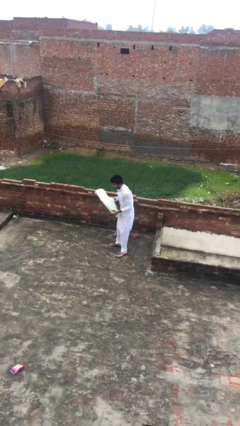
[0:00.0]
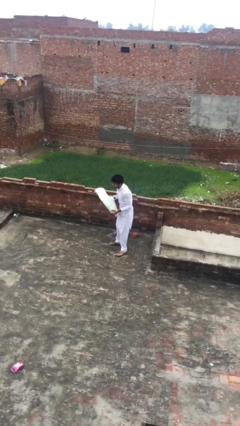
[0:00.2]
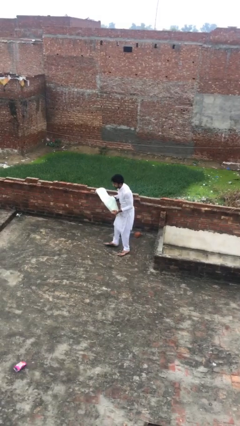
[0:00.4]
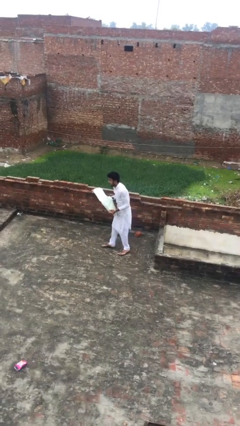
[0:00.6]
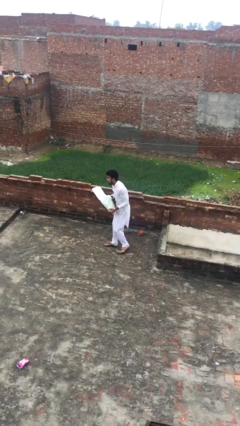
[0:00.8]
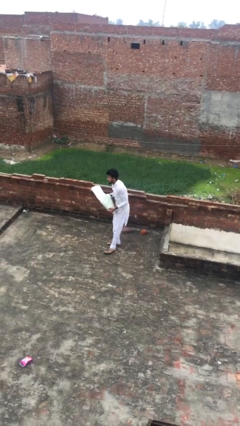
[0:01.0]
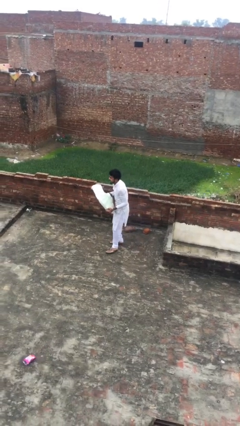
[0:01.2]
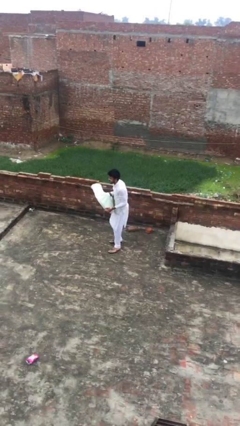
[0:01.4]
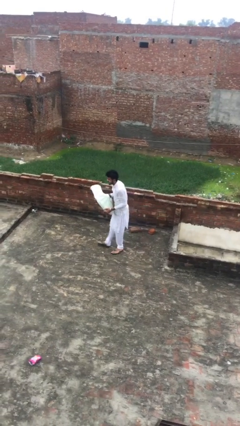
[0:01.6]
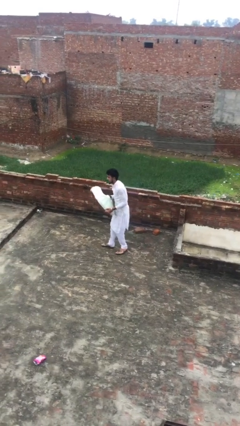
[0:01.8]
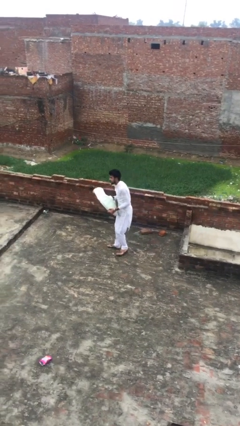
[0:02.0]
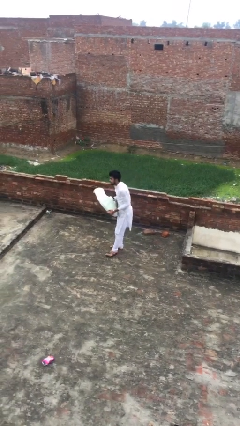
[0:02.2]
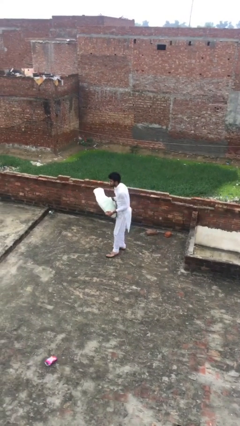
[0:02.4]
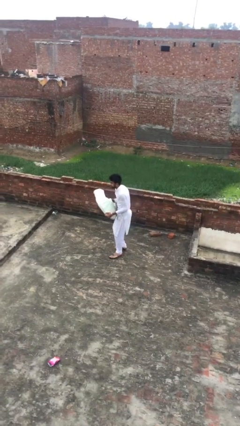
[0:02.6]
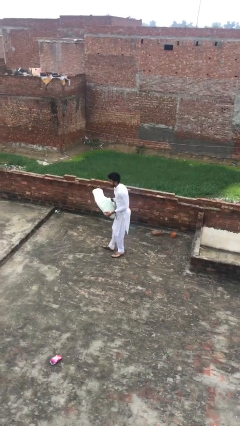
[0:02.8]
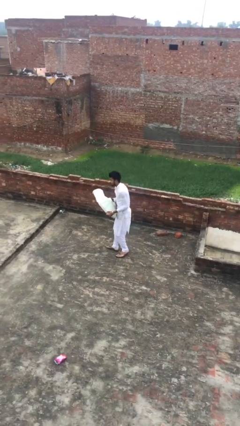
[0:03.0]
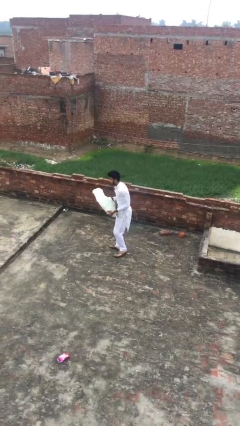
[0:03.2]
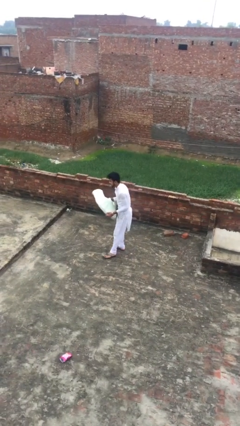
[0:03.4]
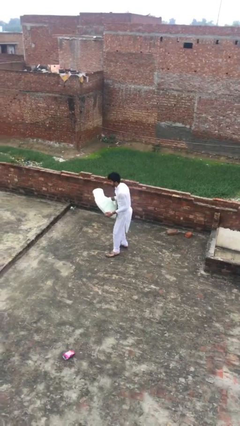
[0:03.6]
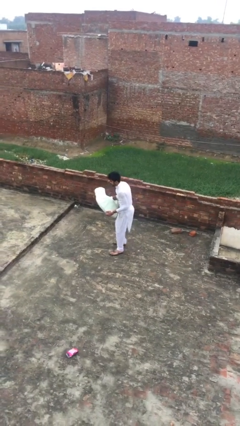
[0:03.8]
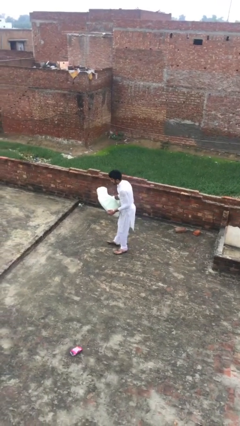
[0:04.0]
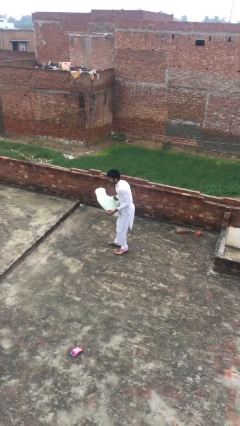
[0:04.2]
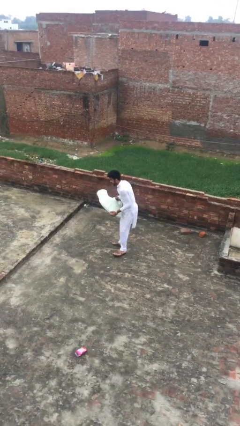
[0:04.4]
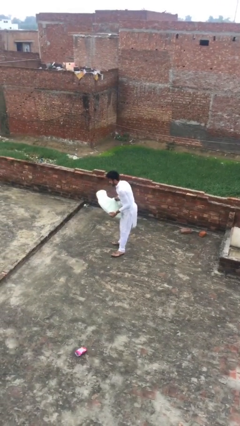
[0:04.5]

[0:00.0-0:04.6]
person carries heavy object

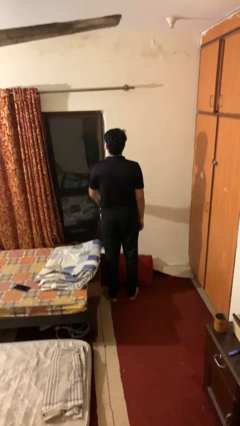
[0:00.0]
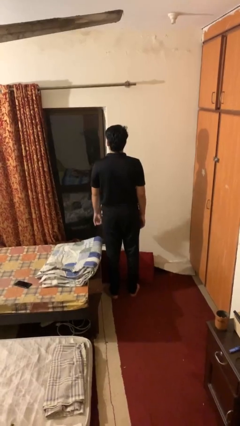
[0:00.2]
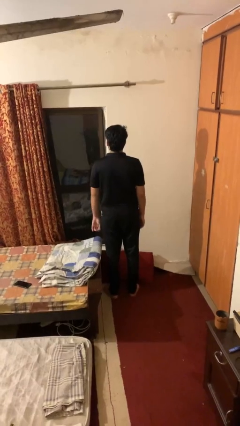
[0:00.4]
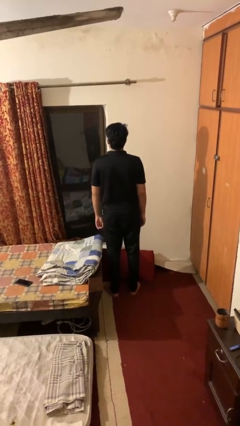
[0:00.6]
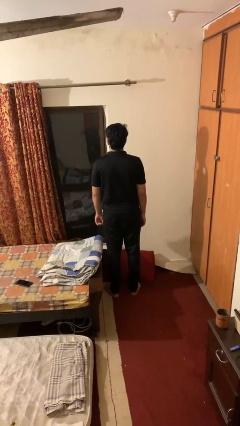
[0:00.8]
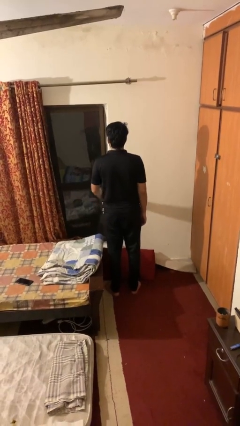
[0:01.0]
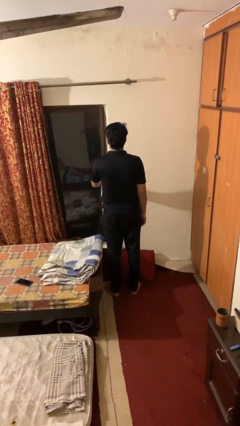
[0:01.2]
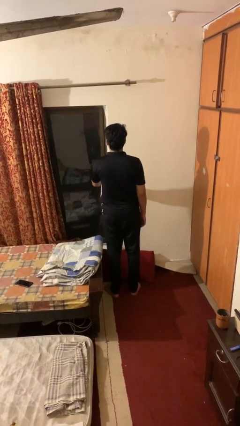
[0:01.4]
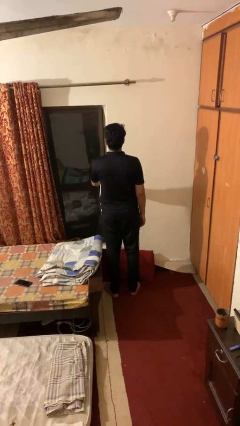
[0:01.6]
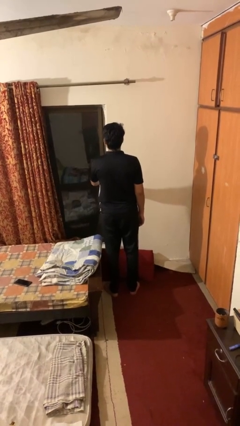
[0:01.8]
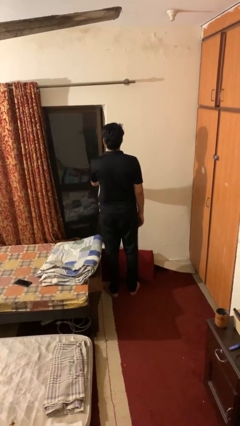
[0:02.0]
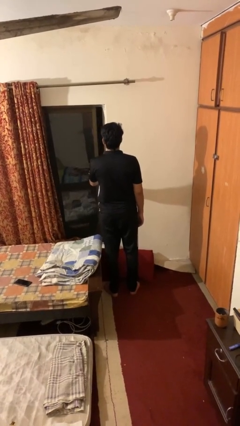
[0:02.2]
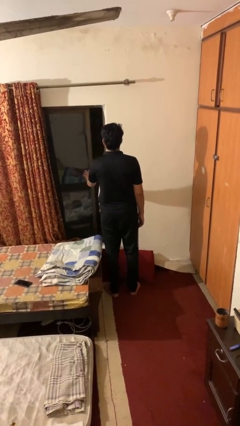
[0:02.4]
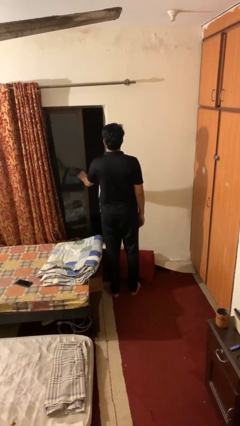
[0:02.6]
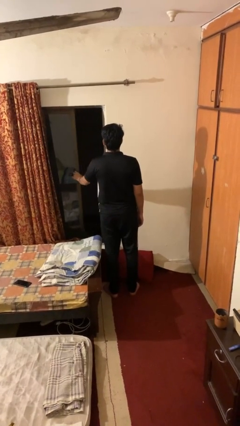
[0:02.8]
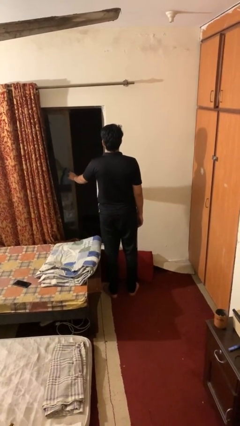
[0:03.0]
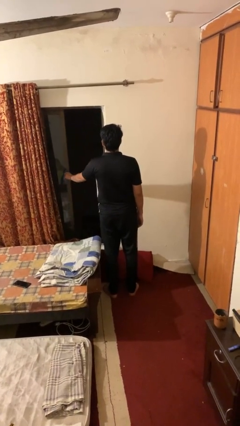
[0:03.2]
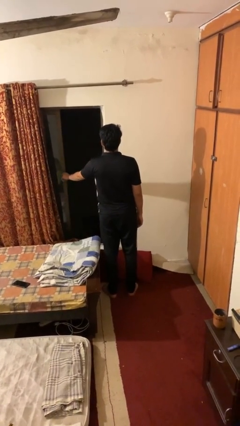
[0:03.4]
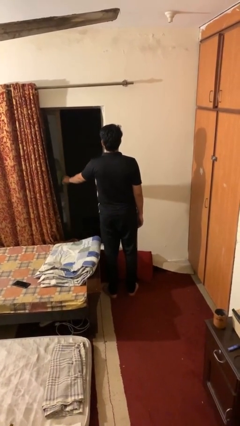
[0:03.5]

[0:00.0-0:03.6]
person opens home window

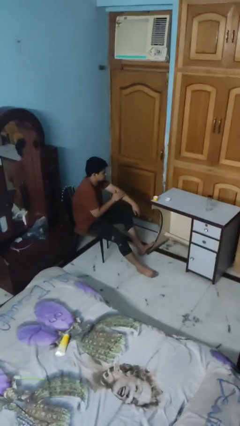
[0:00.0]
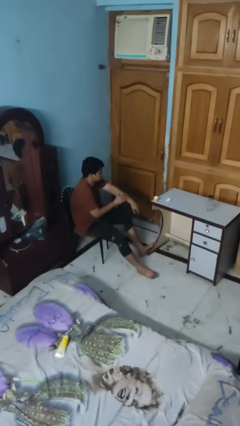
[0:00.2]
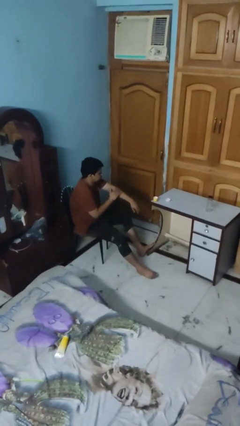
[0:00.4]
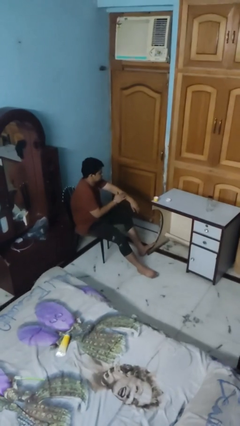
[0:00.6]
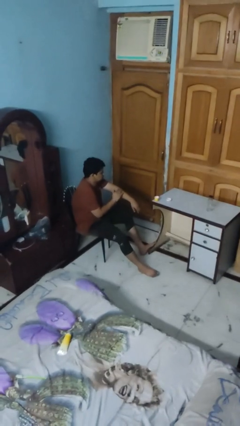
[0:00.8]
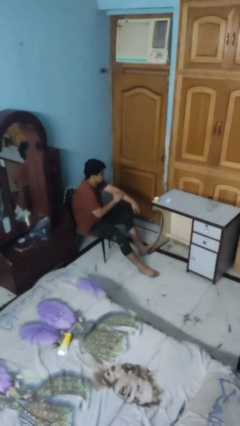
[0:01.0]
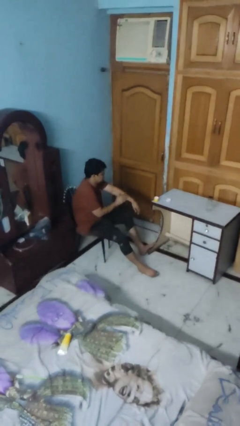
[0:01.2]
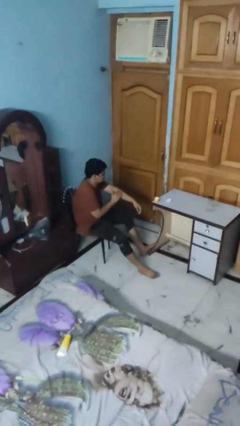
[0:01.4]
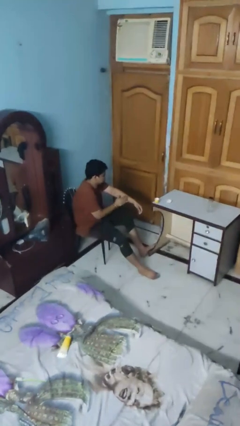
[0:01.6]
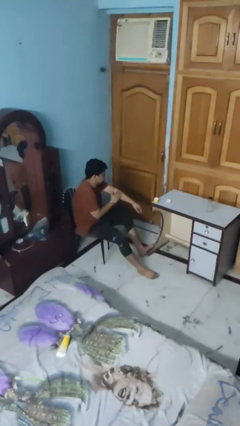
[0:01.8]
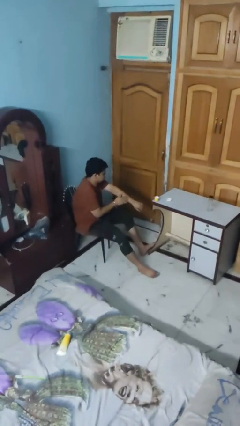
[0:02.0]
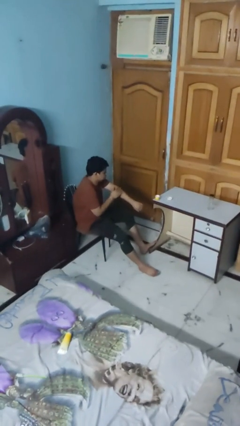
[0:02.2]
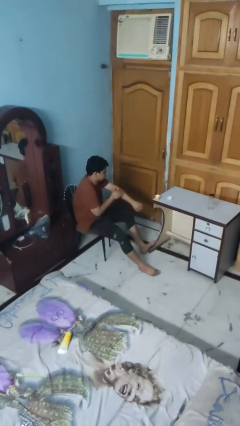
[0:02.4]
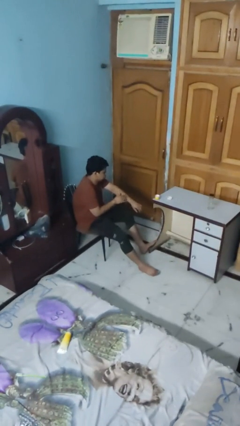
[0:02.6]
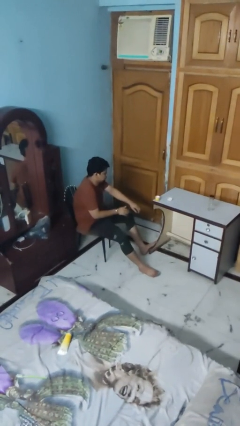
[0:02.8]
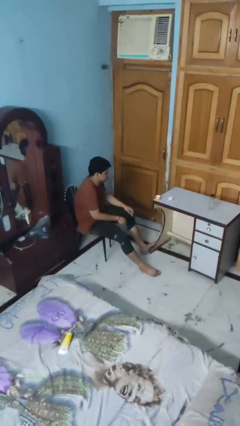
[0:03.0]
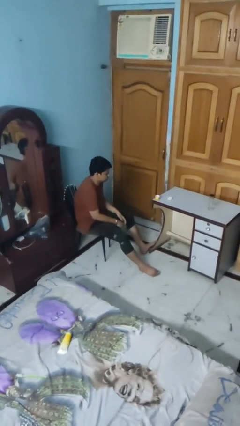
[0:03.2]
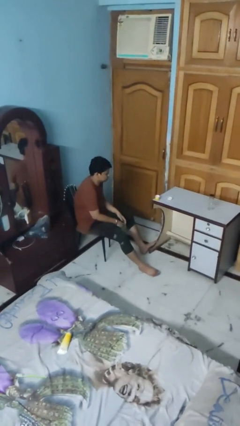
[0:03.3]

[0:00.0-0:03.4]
person applies sunscreen

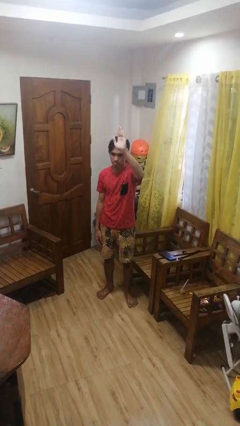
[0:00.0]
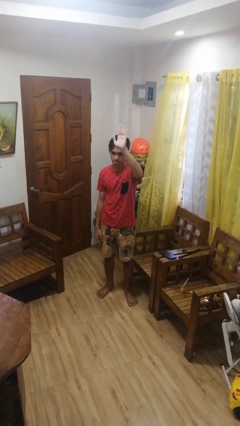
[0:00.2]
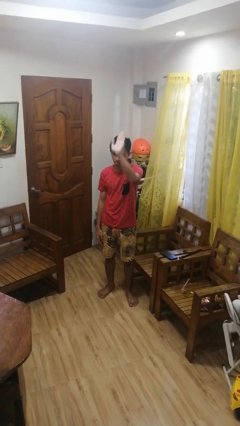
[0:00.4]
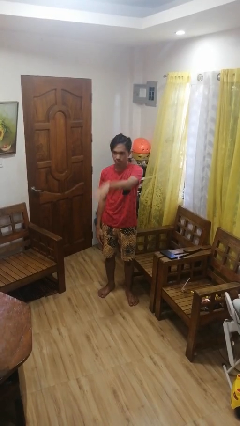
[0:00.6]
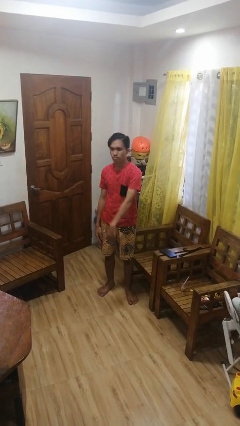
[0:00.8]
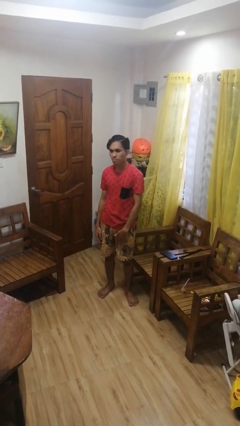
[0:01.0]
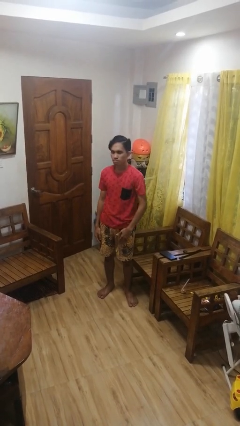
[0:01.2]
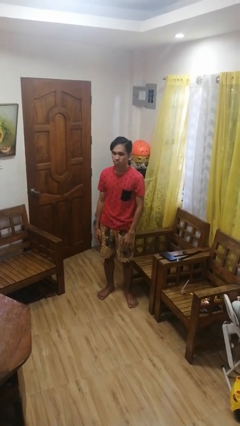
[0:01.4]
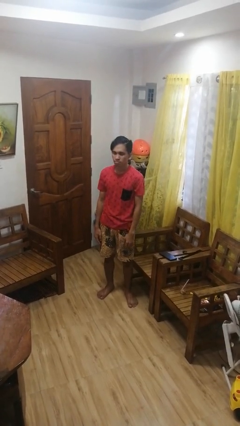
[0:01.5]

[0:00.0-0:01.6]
person gestures swipe down

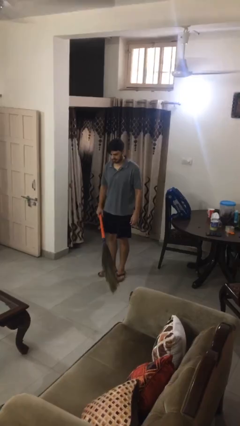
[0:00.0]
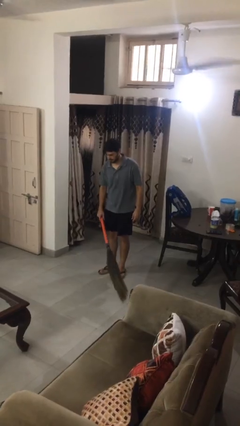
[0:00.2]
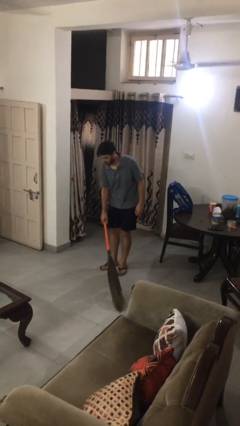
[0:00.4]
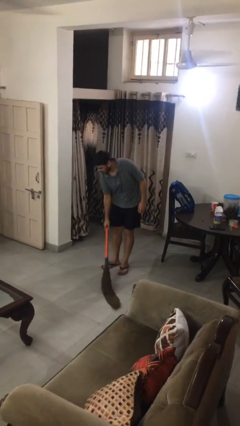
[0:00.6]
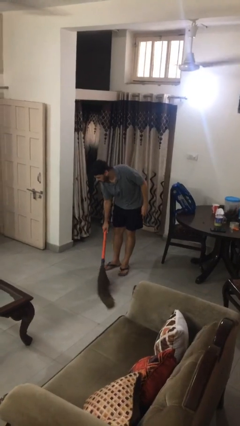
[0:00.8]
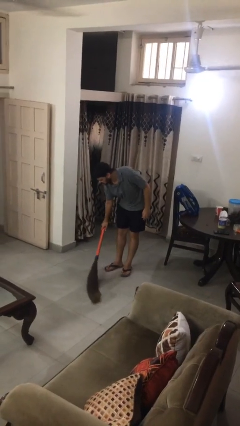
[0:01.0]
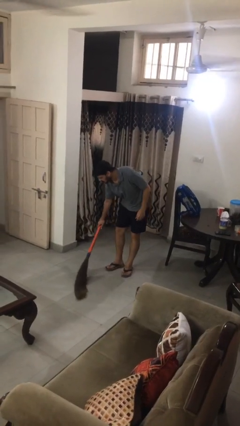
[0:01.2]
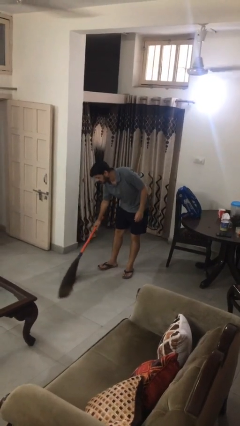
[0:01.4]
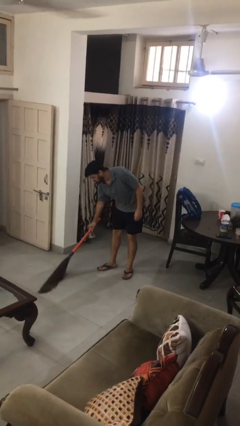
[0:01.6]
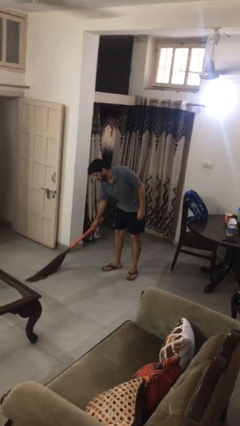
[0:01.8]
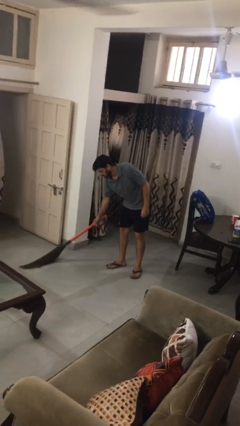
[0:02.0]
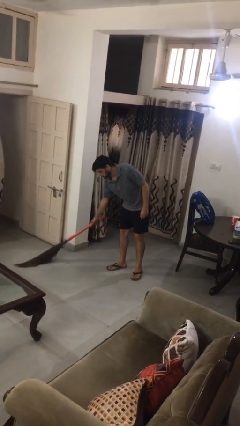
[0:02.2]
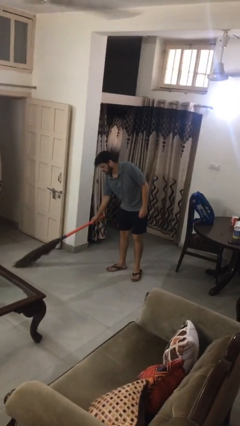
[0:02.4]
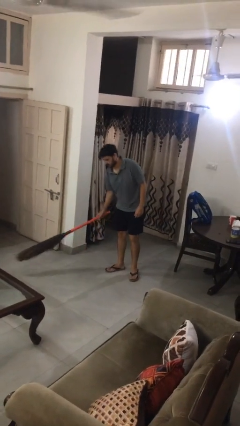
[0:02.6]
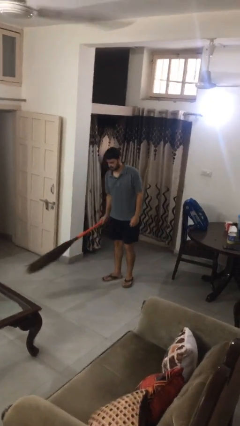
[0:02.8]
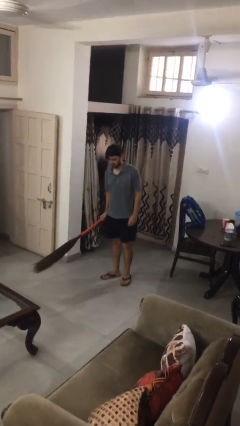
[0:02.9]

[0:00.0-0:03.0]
person sweeps floor

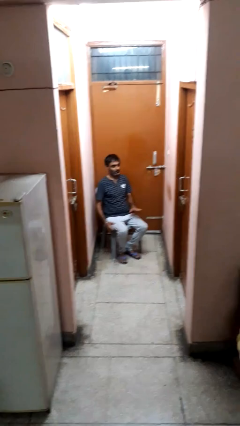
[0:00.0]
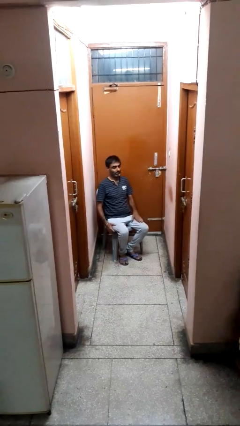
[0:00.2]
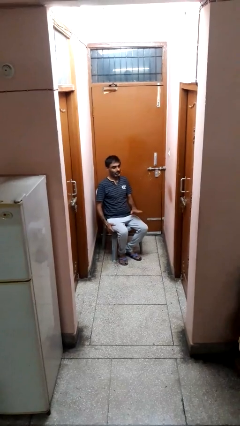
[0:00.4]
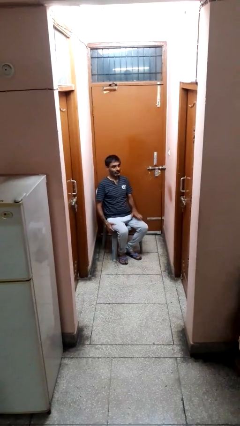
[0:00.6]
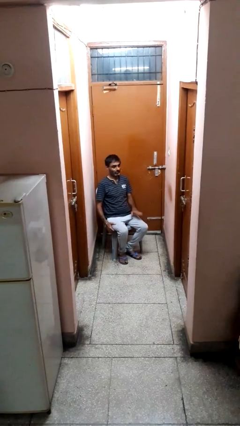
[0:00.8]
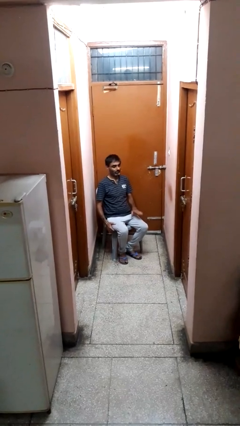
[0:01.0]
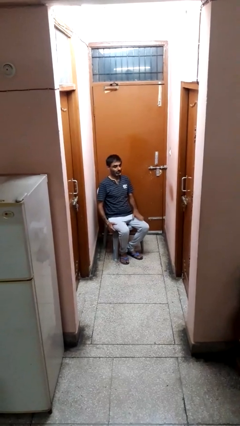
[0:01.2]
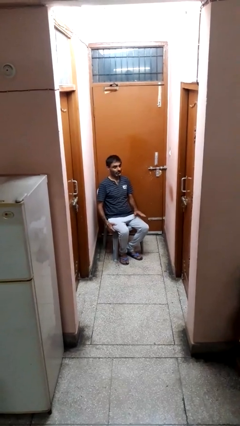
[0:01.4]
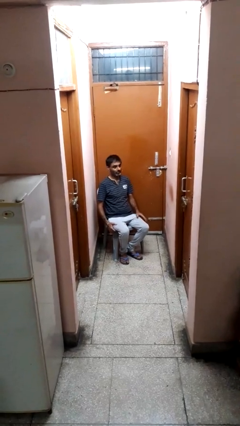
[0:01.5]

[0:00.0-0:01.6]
person slaps hands on thighs
